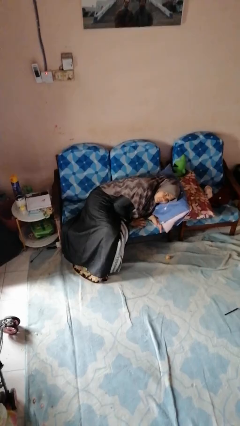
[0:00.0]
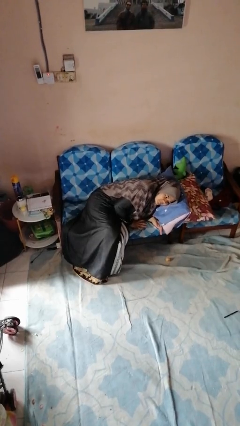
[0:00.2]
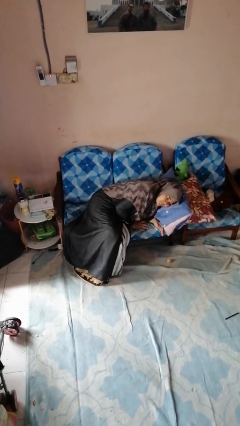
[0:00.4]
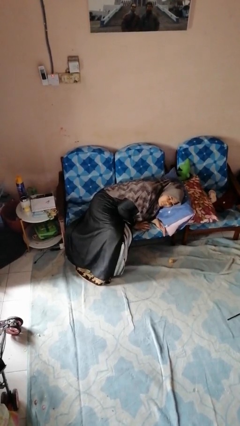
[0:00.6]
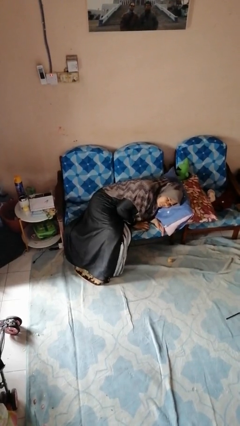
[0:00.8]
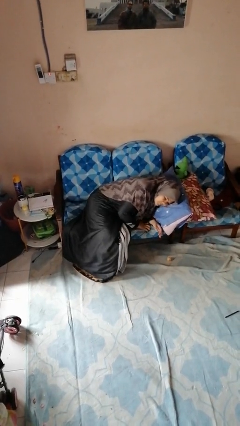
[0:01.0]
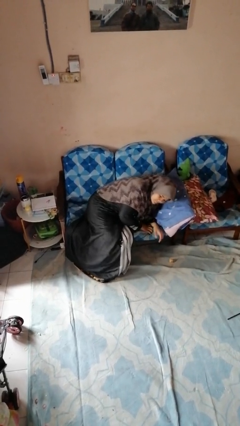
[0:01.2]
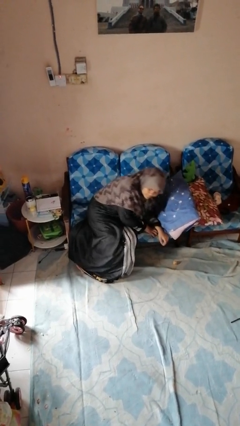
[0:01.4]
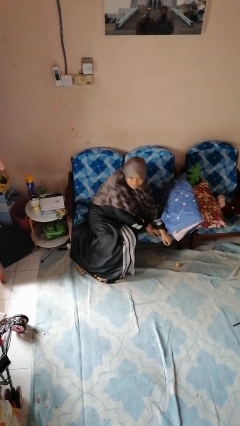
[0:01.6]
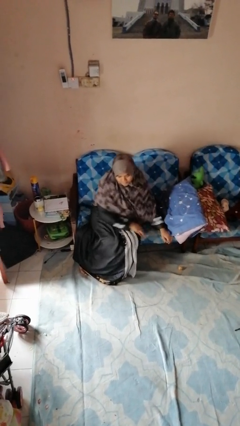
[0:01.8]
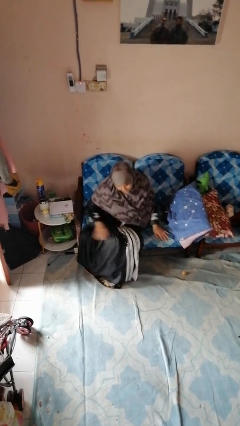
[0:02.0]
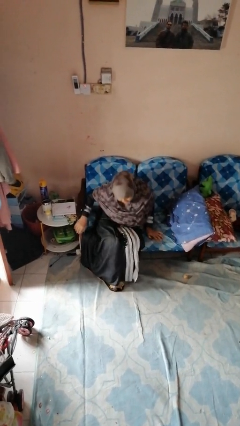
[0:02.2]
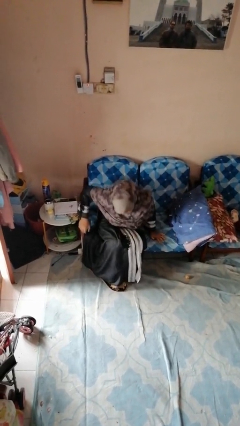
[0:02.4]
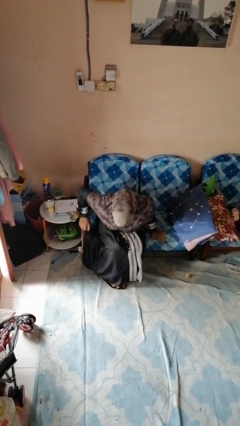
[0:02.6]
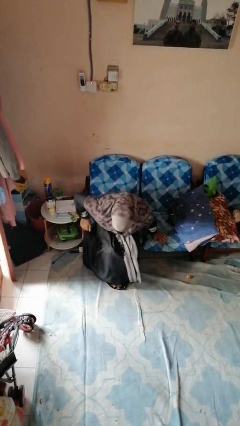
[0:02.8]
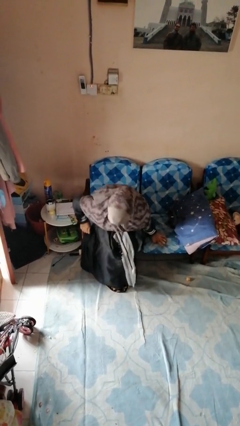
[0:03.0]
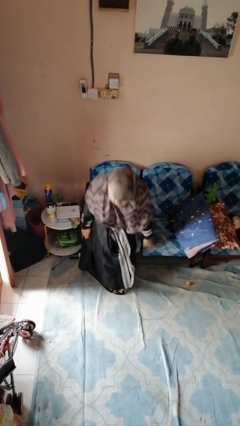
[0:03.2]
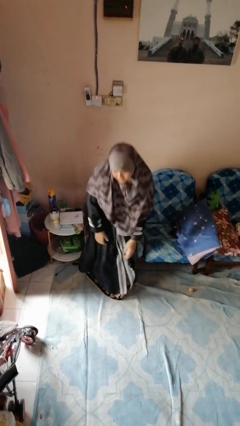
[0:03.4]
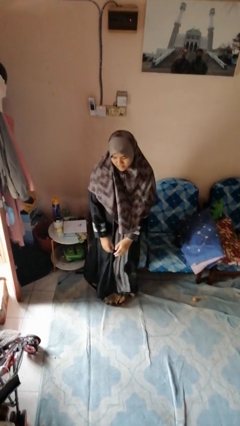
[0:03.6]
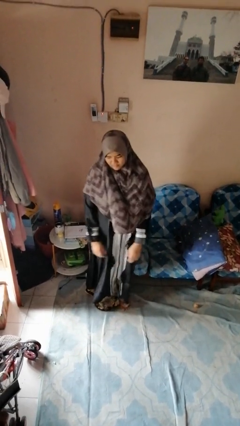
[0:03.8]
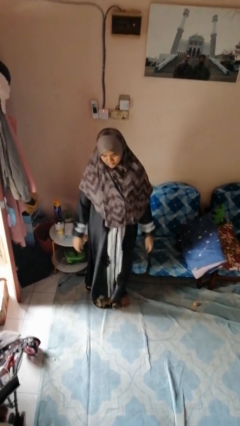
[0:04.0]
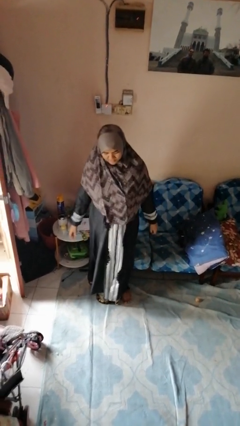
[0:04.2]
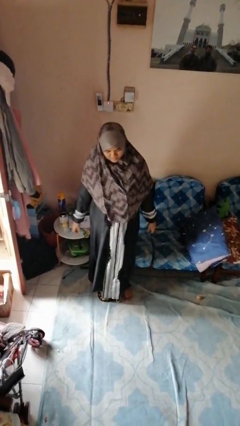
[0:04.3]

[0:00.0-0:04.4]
person stands up

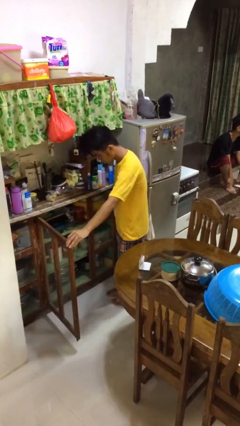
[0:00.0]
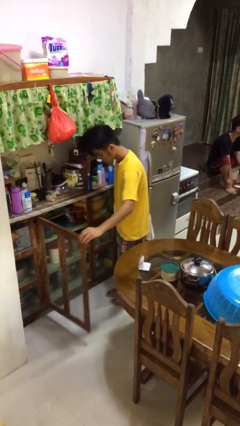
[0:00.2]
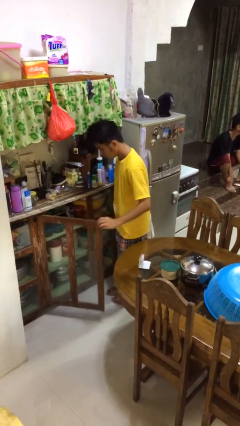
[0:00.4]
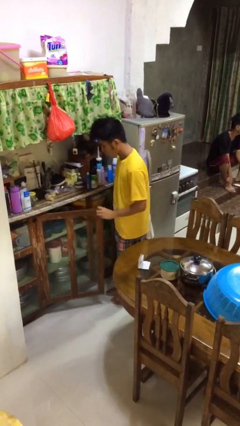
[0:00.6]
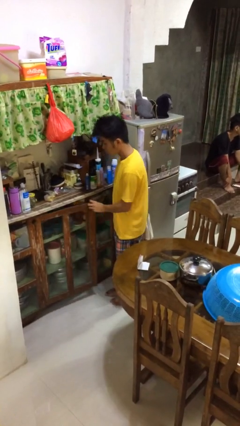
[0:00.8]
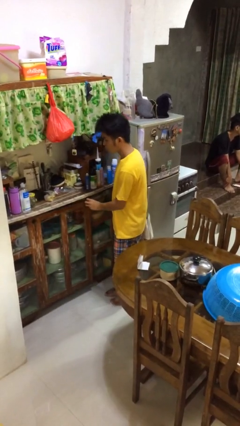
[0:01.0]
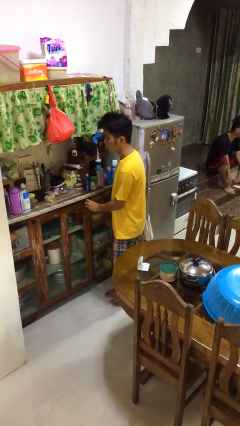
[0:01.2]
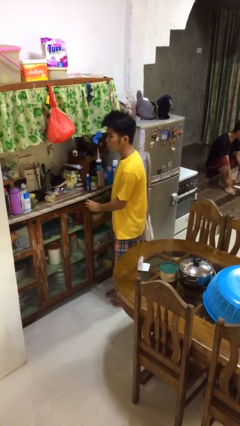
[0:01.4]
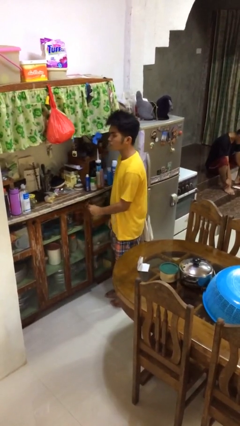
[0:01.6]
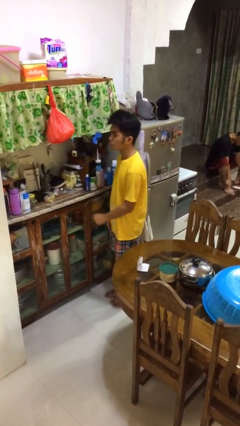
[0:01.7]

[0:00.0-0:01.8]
person closes cabinet

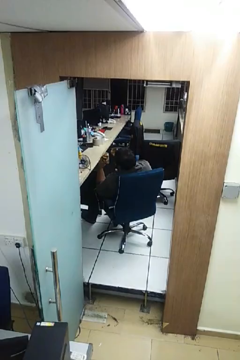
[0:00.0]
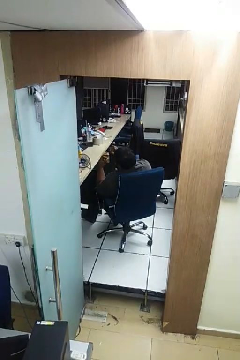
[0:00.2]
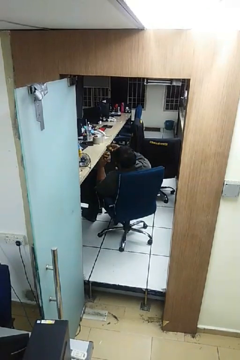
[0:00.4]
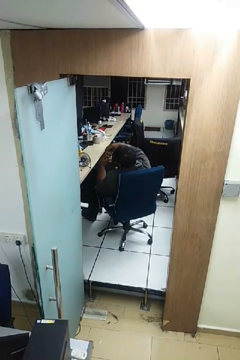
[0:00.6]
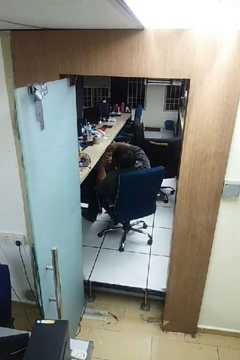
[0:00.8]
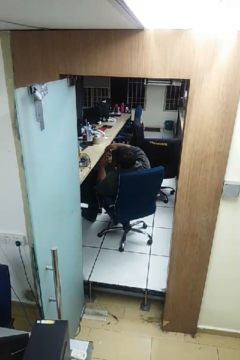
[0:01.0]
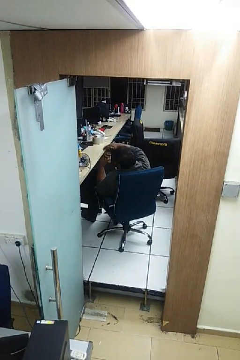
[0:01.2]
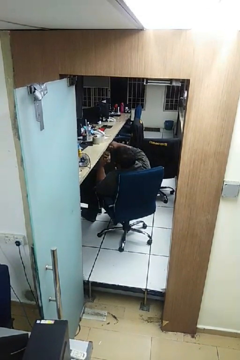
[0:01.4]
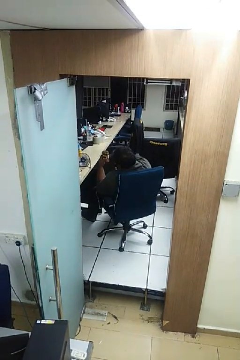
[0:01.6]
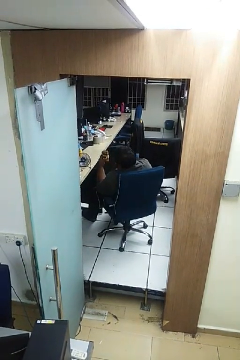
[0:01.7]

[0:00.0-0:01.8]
person closes jar

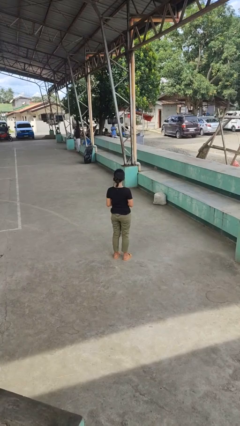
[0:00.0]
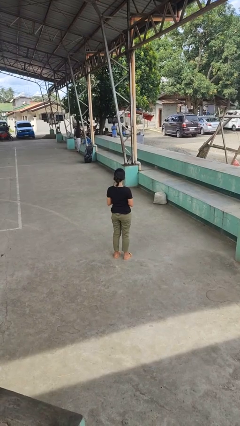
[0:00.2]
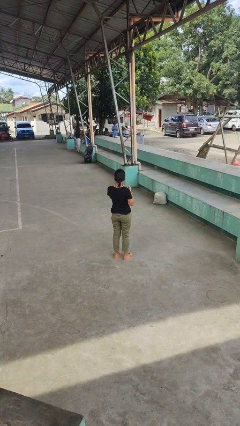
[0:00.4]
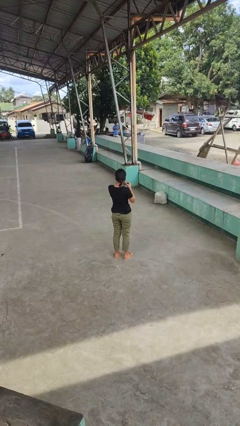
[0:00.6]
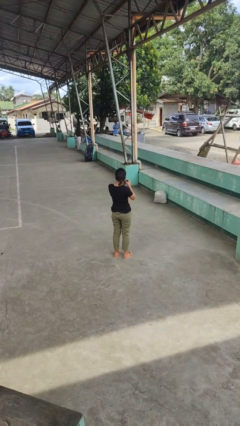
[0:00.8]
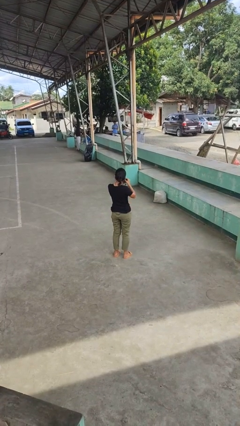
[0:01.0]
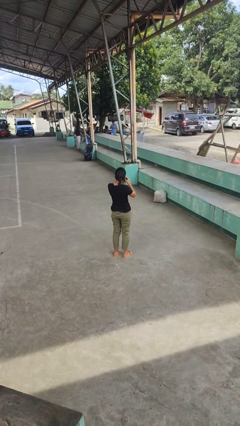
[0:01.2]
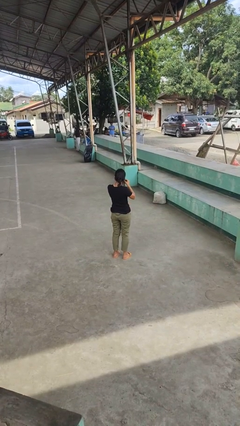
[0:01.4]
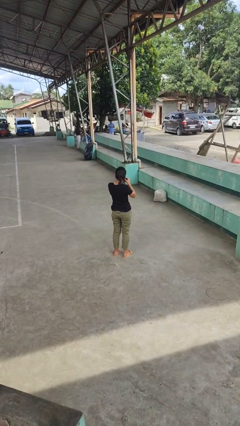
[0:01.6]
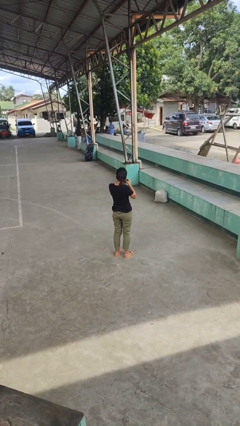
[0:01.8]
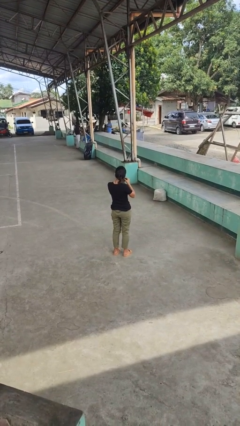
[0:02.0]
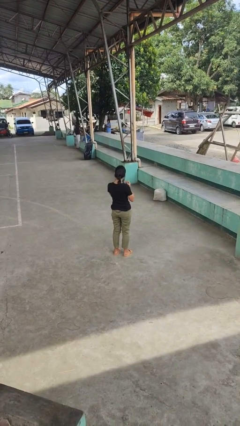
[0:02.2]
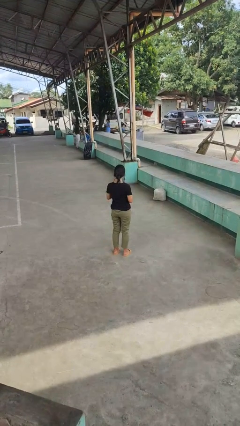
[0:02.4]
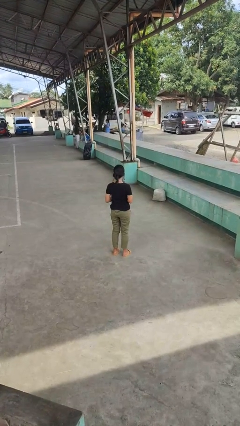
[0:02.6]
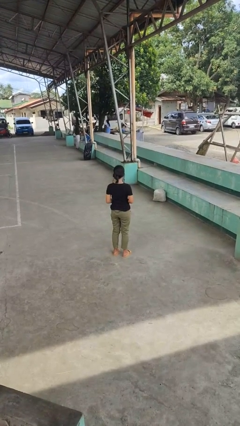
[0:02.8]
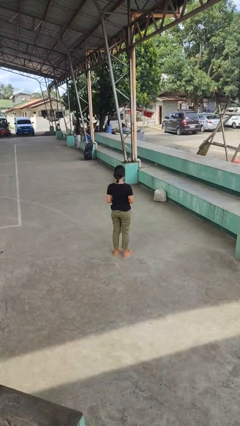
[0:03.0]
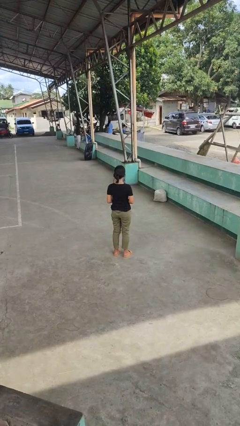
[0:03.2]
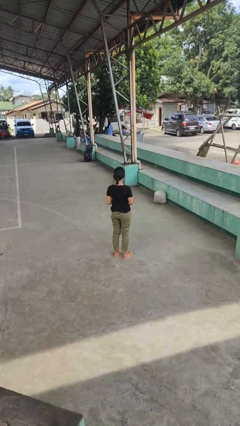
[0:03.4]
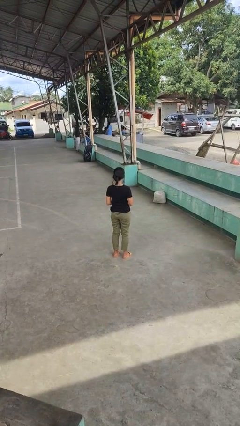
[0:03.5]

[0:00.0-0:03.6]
person puts on earrings

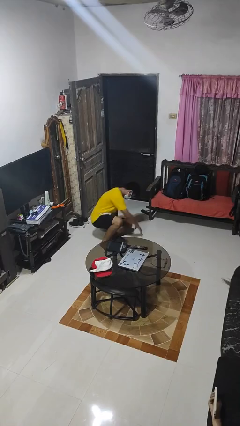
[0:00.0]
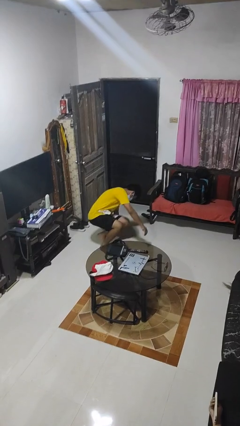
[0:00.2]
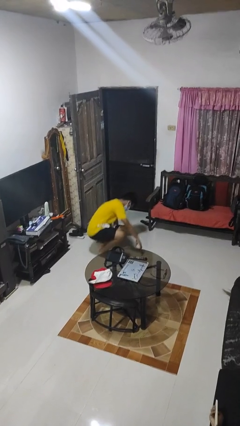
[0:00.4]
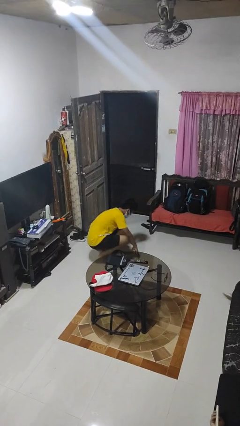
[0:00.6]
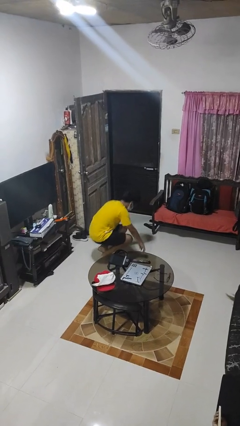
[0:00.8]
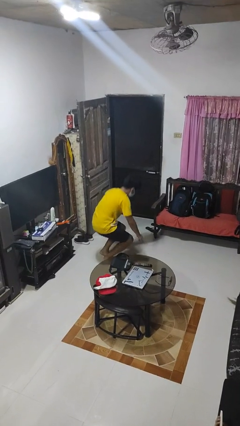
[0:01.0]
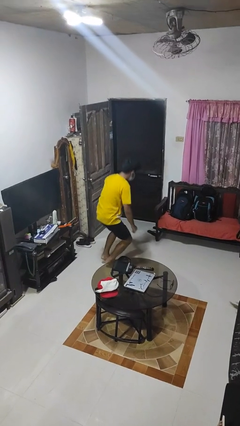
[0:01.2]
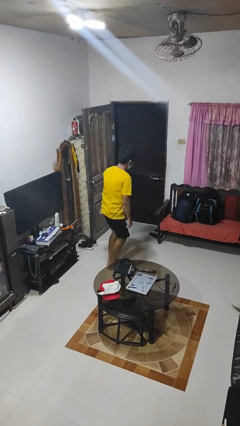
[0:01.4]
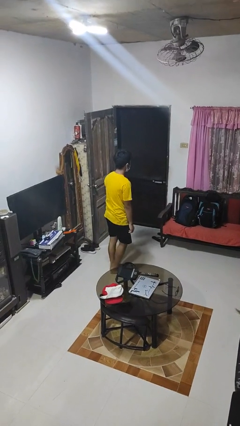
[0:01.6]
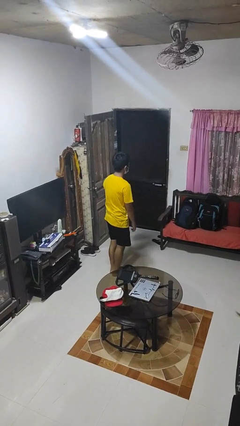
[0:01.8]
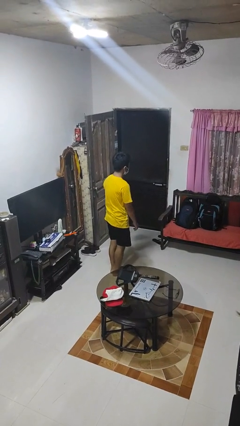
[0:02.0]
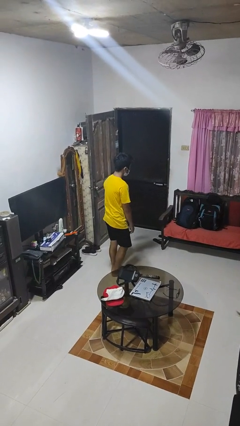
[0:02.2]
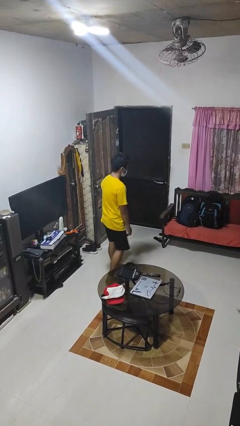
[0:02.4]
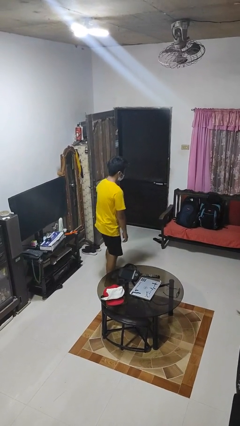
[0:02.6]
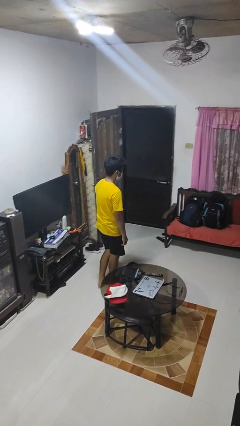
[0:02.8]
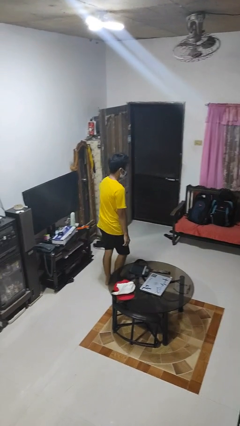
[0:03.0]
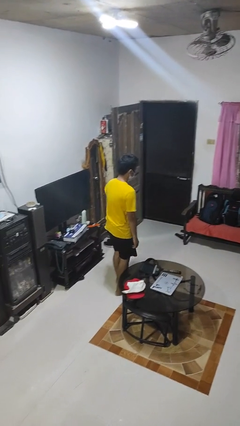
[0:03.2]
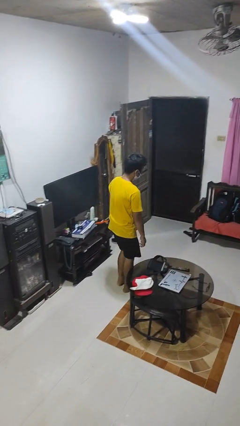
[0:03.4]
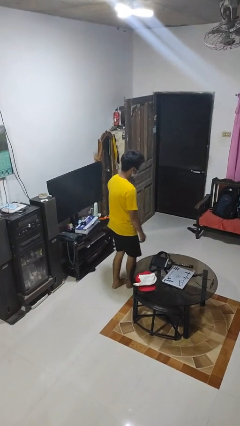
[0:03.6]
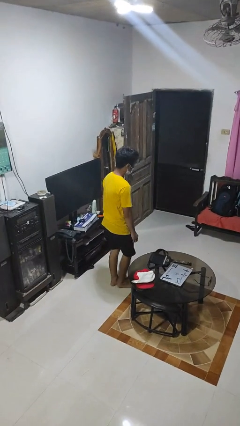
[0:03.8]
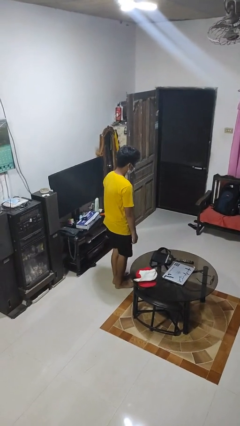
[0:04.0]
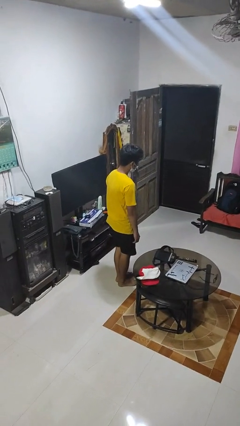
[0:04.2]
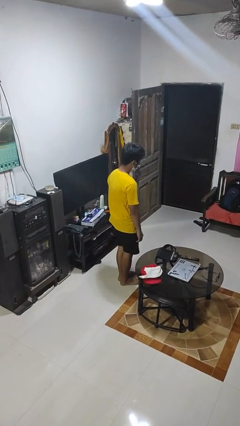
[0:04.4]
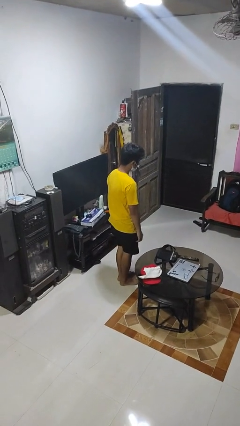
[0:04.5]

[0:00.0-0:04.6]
person stands up from floor

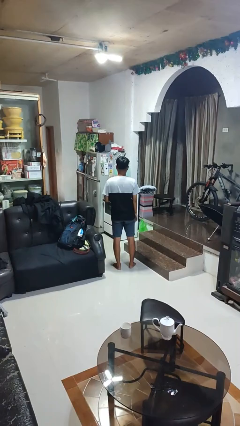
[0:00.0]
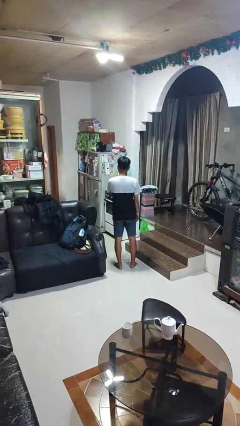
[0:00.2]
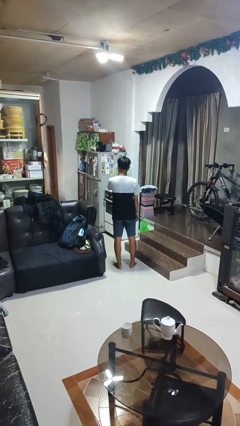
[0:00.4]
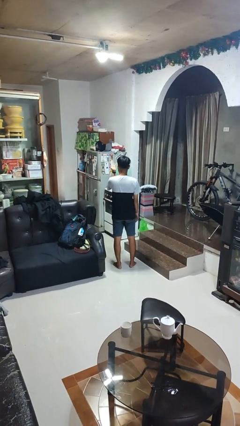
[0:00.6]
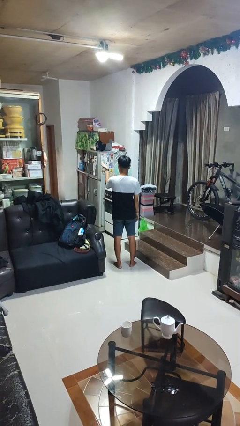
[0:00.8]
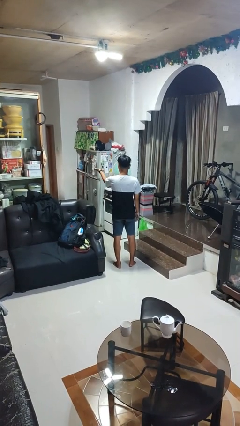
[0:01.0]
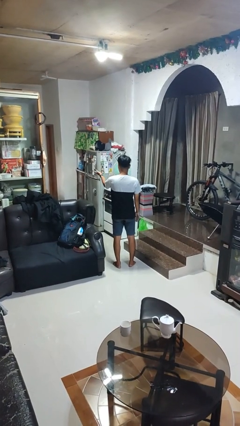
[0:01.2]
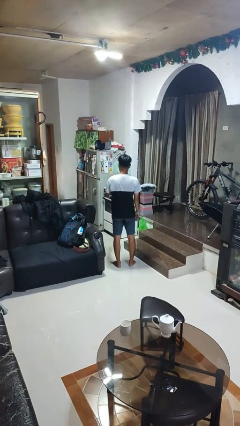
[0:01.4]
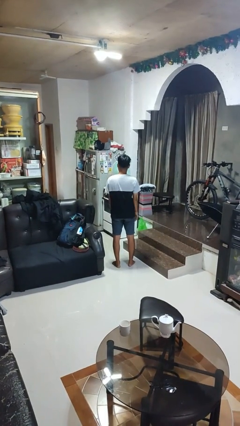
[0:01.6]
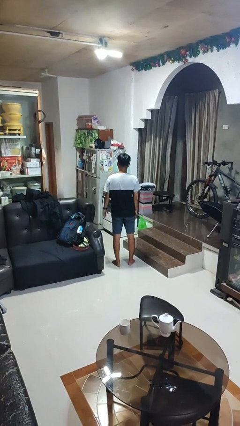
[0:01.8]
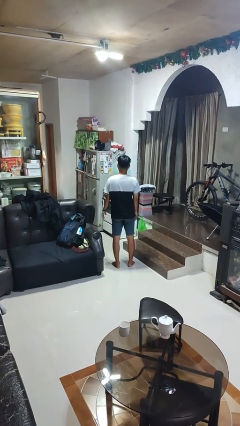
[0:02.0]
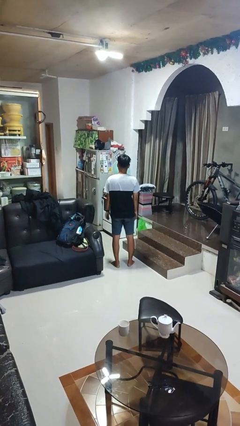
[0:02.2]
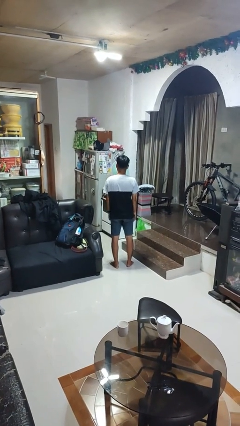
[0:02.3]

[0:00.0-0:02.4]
person gestures blow kiss
